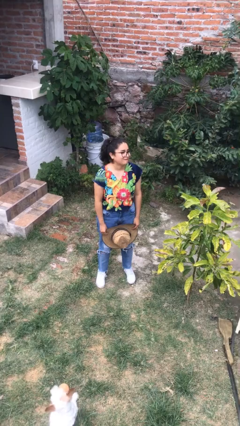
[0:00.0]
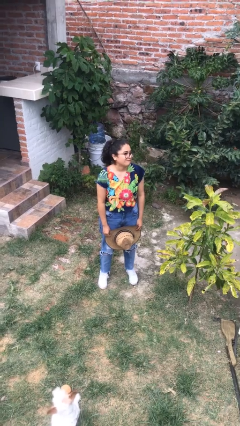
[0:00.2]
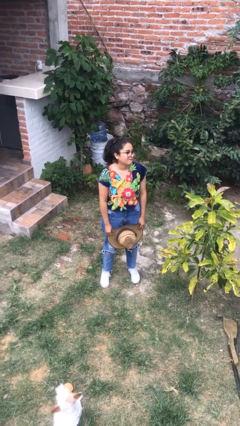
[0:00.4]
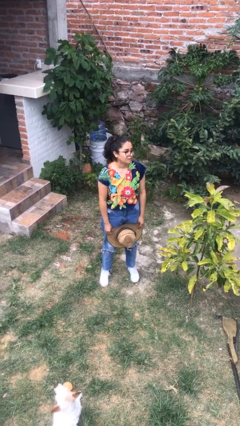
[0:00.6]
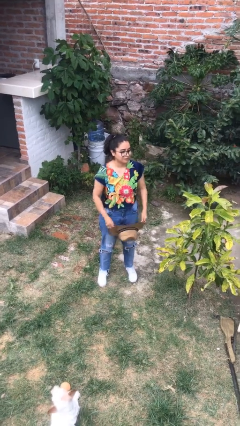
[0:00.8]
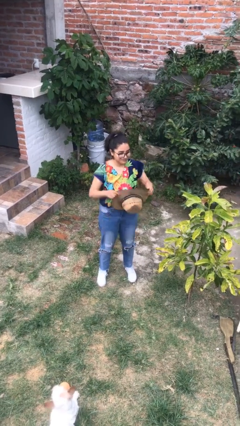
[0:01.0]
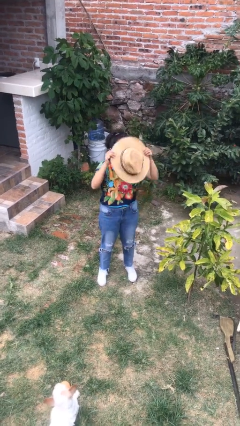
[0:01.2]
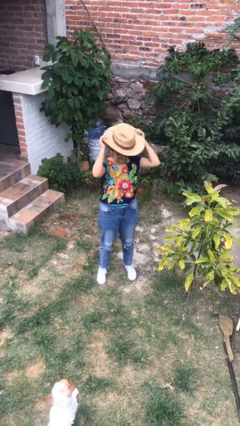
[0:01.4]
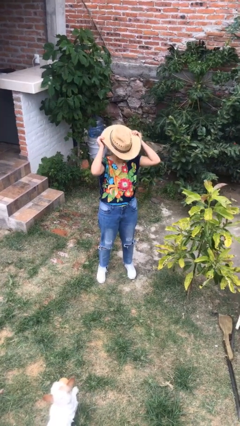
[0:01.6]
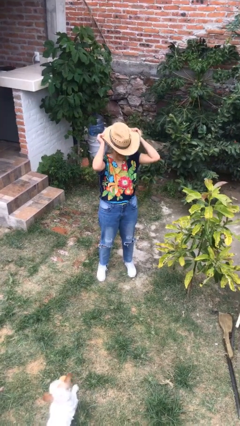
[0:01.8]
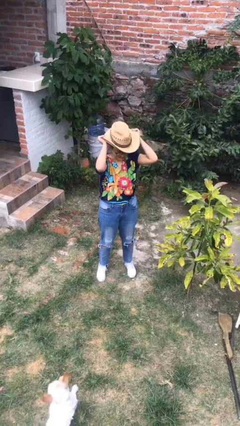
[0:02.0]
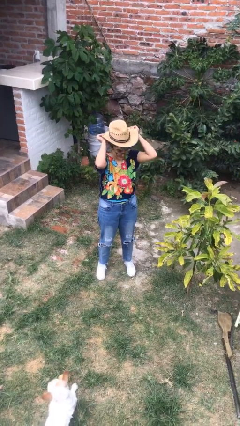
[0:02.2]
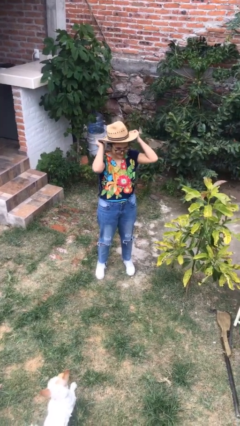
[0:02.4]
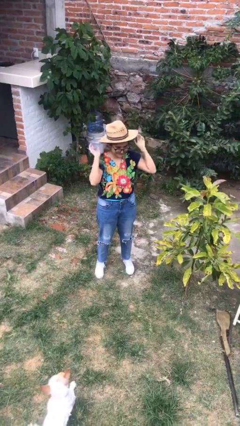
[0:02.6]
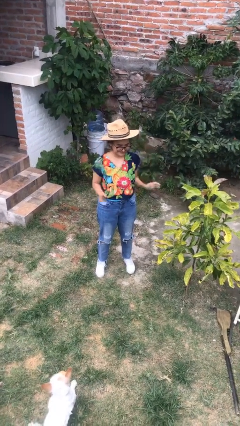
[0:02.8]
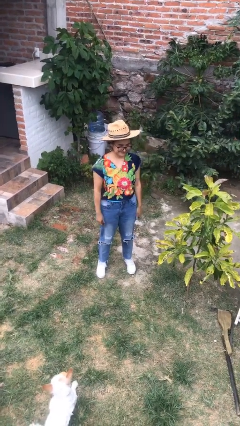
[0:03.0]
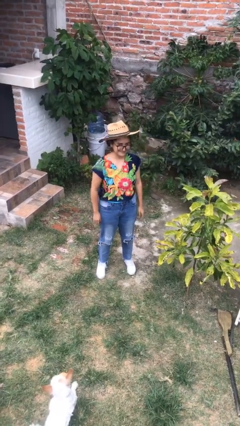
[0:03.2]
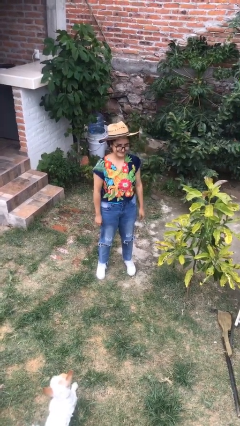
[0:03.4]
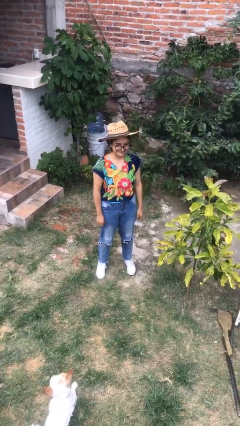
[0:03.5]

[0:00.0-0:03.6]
person puts on hat

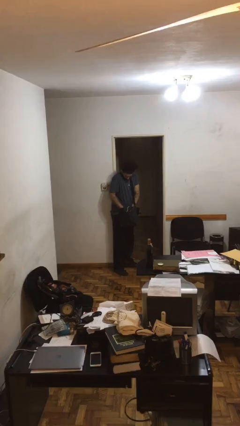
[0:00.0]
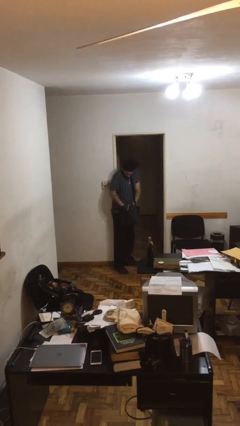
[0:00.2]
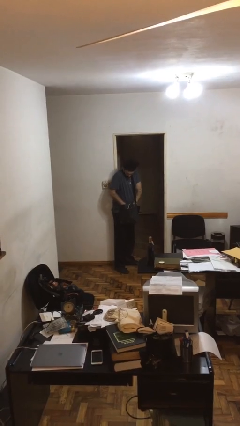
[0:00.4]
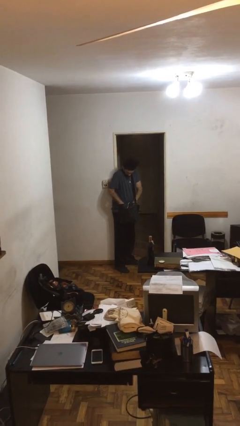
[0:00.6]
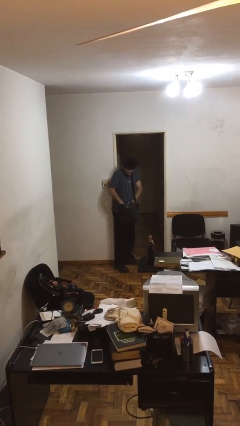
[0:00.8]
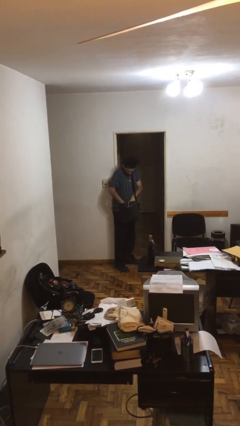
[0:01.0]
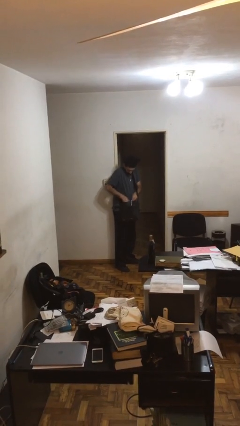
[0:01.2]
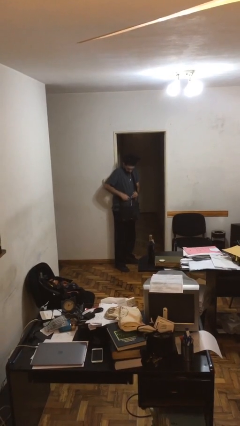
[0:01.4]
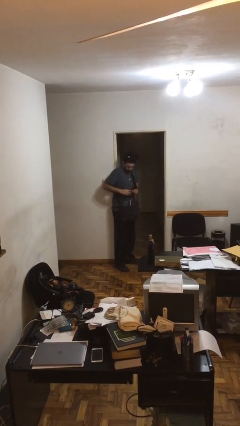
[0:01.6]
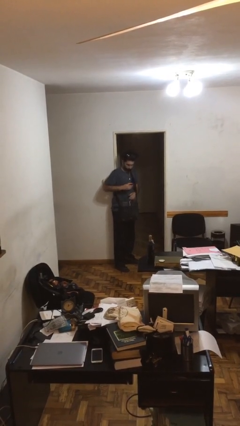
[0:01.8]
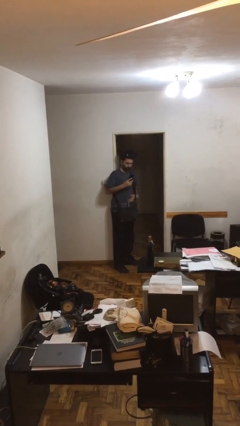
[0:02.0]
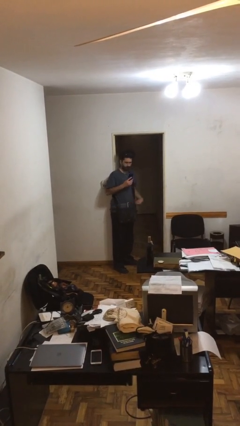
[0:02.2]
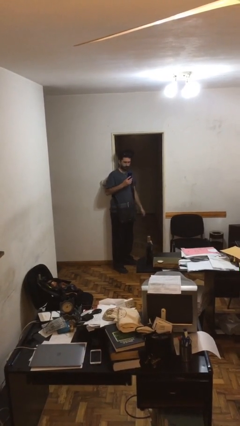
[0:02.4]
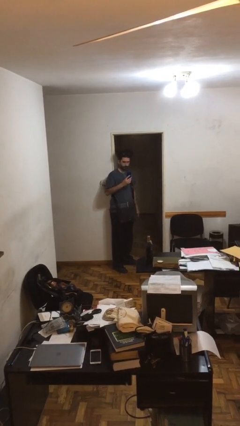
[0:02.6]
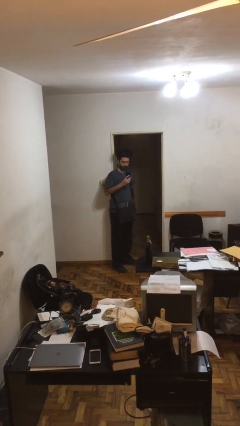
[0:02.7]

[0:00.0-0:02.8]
person takes object from purse

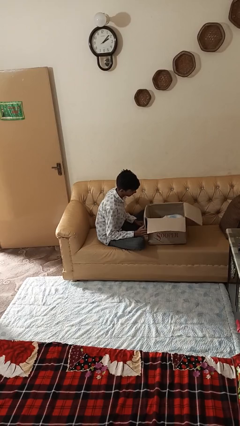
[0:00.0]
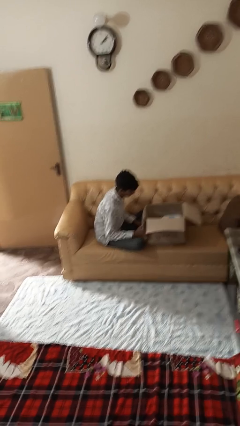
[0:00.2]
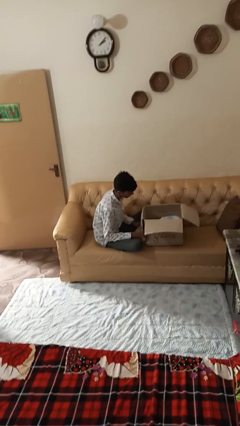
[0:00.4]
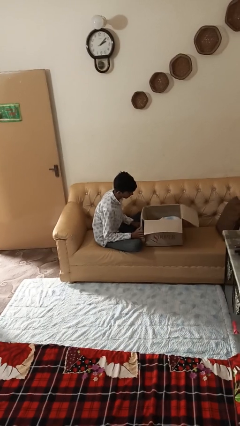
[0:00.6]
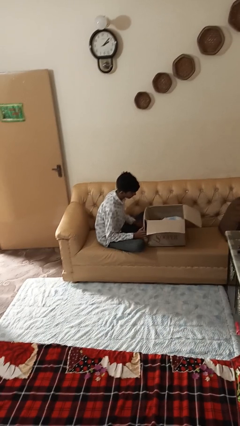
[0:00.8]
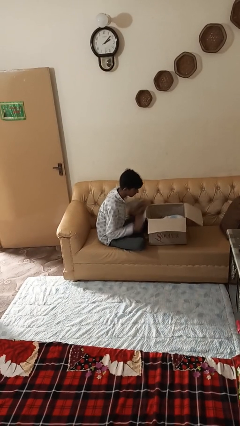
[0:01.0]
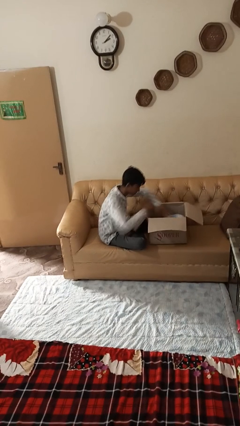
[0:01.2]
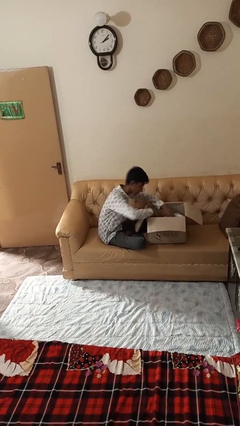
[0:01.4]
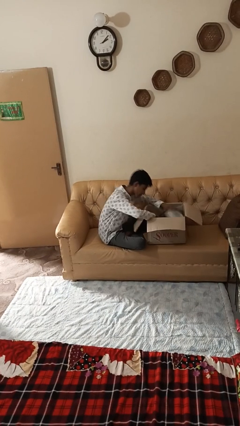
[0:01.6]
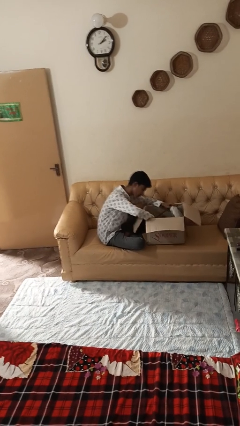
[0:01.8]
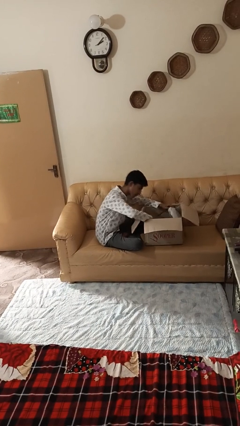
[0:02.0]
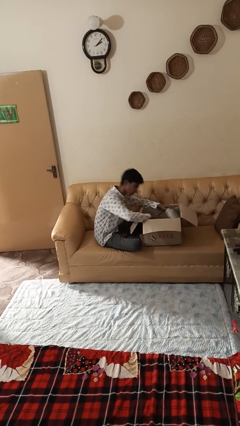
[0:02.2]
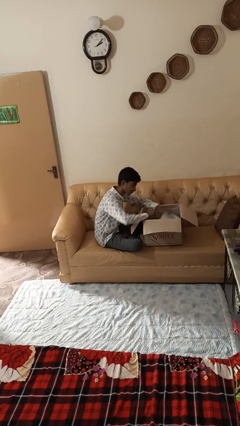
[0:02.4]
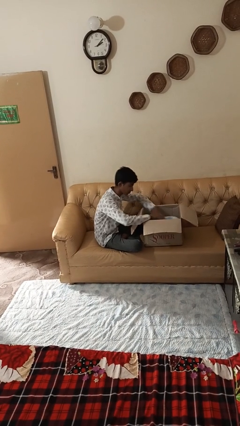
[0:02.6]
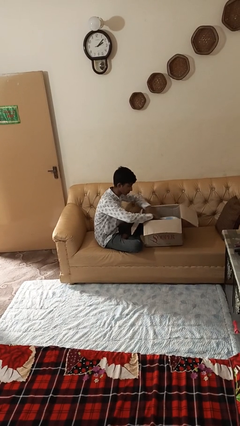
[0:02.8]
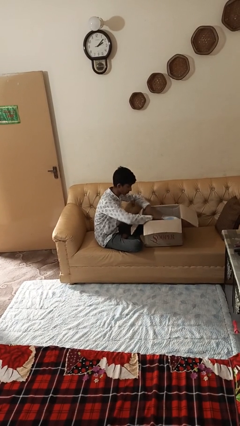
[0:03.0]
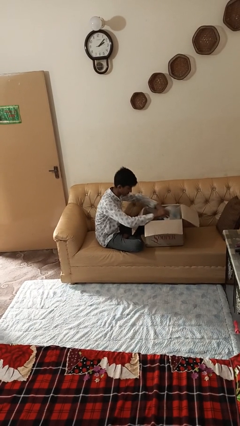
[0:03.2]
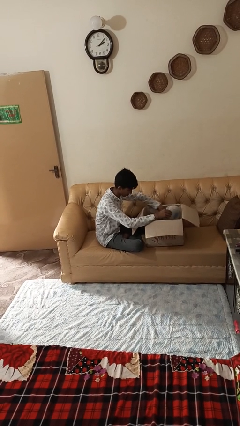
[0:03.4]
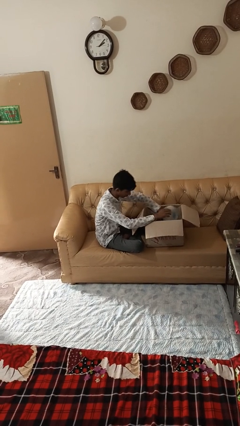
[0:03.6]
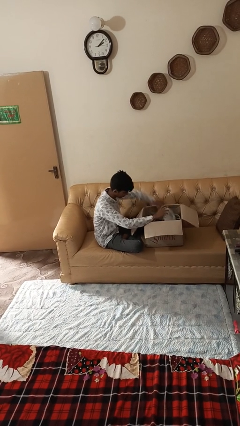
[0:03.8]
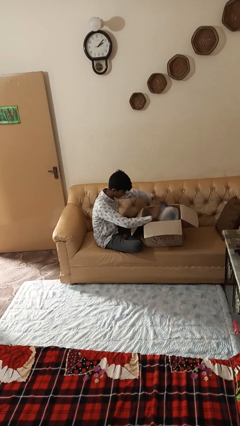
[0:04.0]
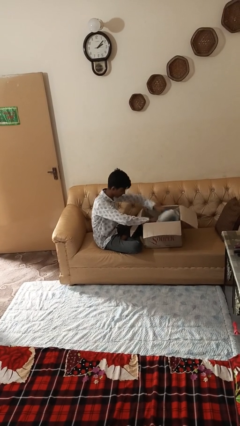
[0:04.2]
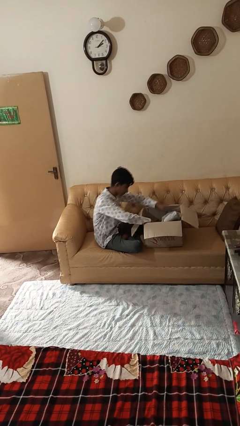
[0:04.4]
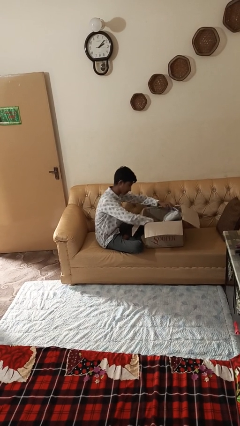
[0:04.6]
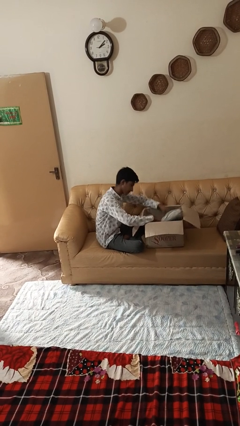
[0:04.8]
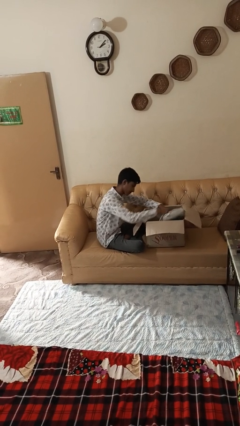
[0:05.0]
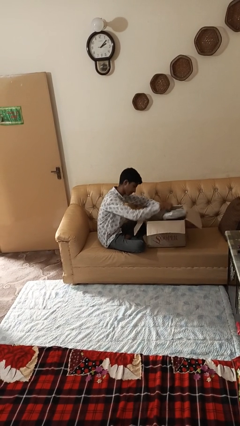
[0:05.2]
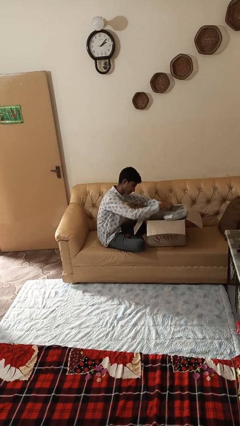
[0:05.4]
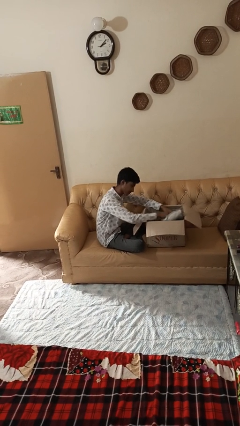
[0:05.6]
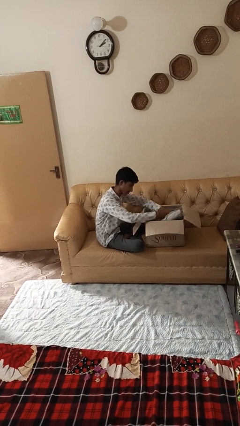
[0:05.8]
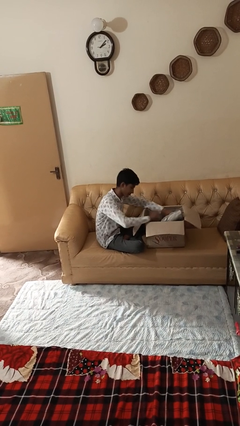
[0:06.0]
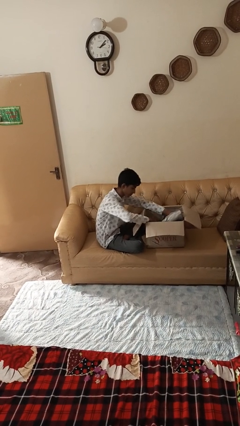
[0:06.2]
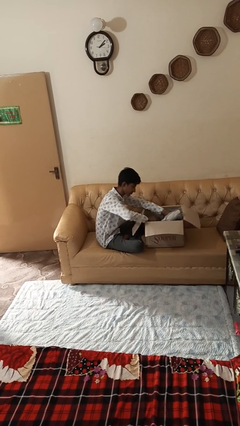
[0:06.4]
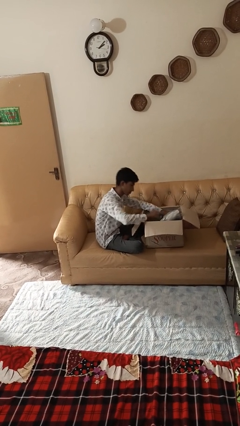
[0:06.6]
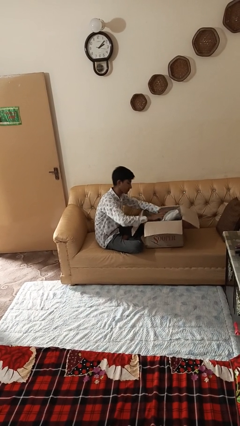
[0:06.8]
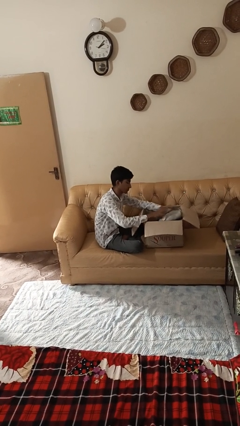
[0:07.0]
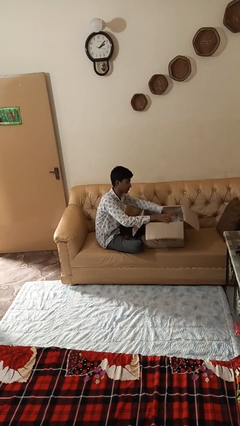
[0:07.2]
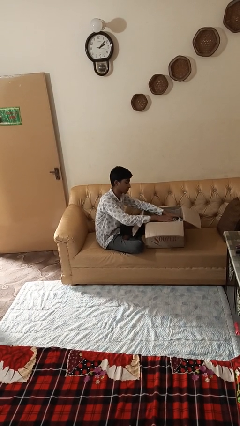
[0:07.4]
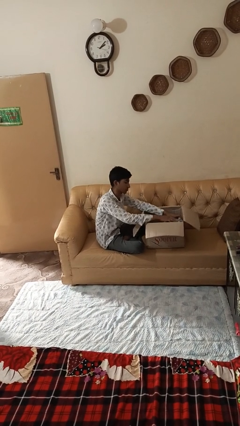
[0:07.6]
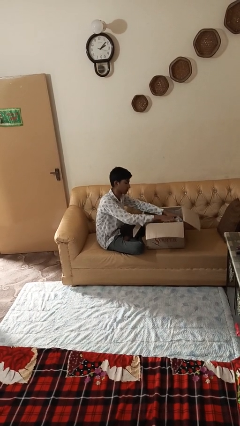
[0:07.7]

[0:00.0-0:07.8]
person searches in box

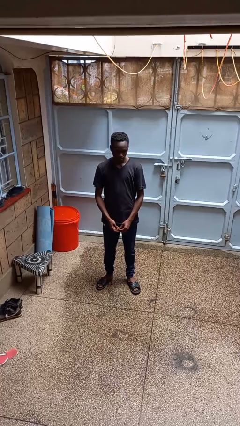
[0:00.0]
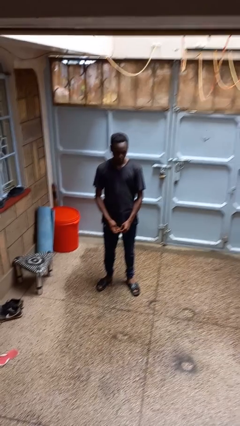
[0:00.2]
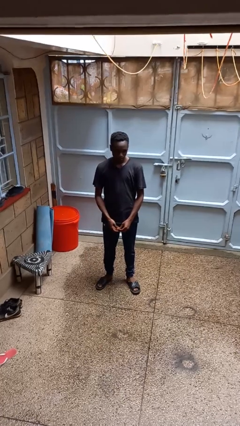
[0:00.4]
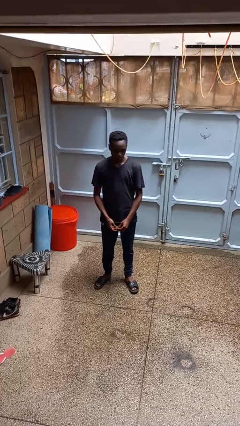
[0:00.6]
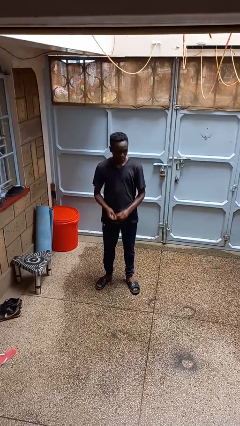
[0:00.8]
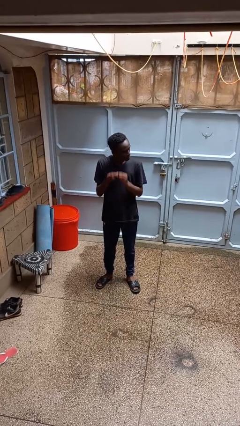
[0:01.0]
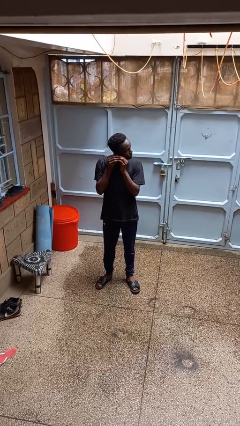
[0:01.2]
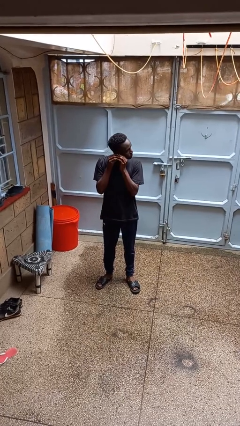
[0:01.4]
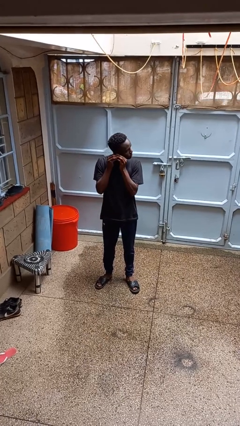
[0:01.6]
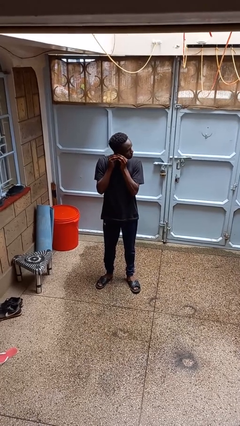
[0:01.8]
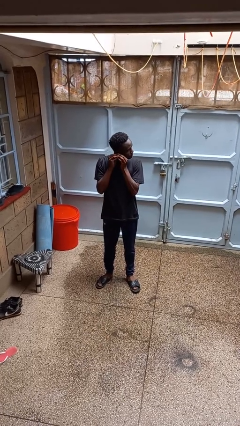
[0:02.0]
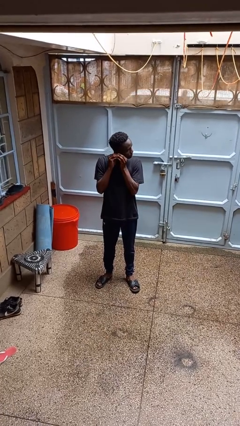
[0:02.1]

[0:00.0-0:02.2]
person puts on earrings

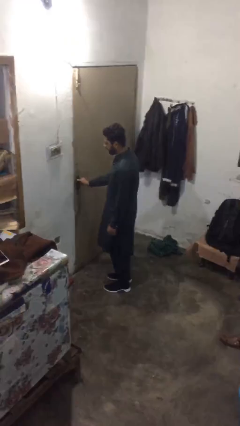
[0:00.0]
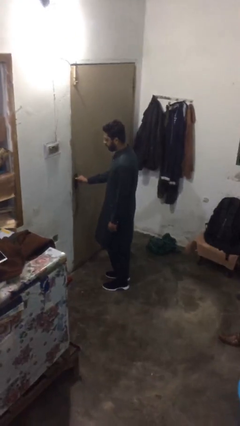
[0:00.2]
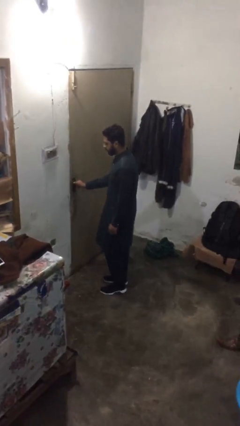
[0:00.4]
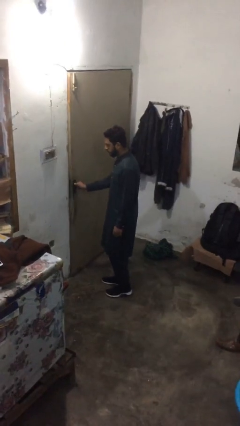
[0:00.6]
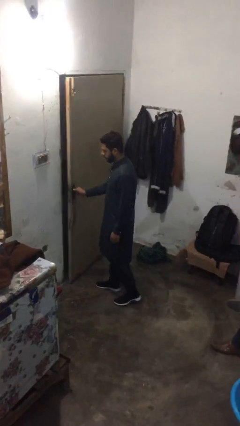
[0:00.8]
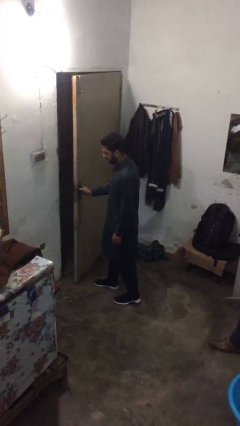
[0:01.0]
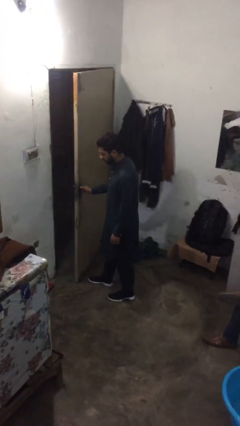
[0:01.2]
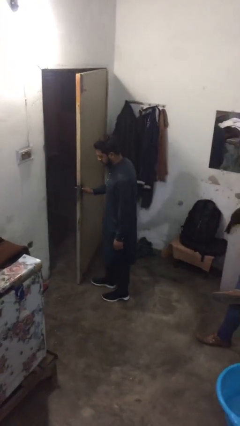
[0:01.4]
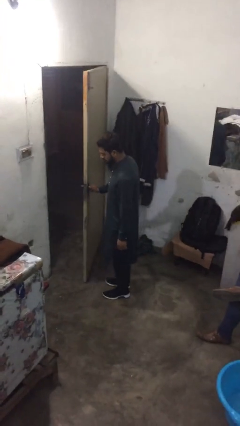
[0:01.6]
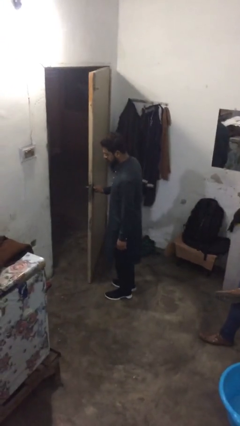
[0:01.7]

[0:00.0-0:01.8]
person opens facility door
